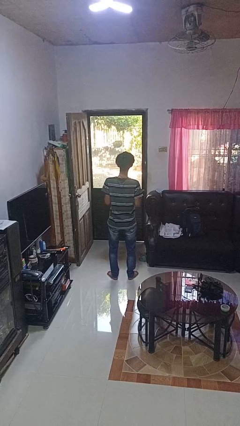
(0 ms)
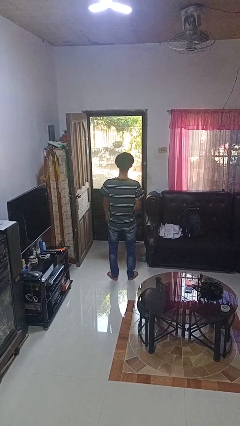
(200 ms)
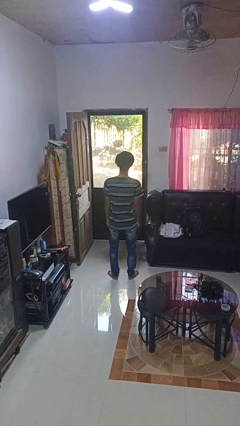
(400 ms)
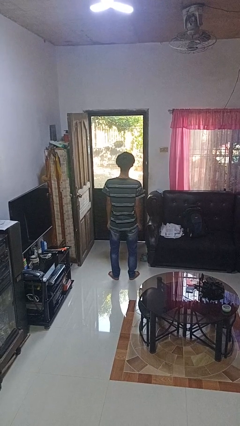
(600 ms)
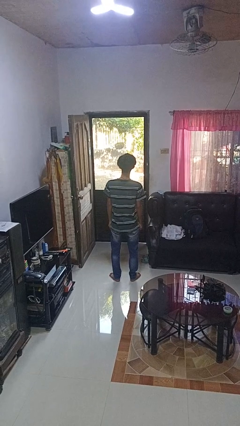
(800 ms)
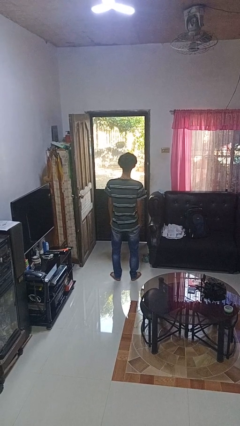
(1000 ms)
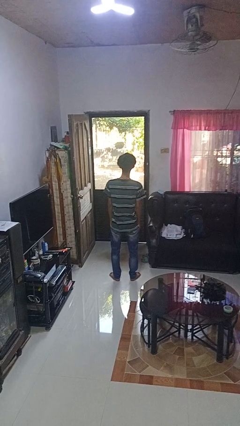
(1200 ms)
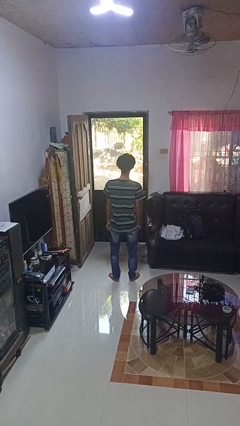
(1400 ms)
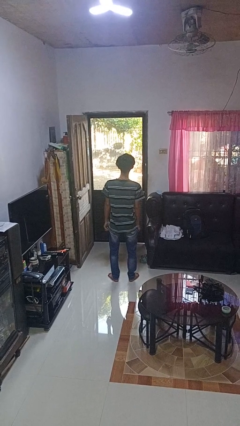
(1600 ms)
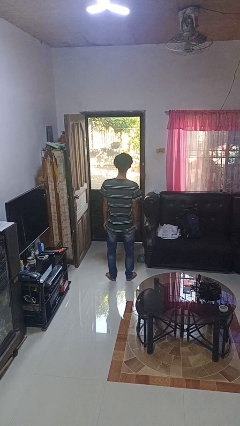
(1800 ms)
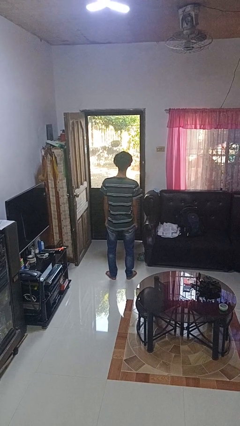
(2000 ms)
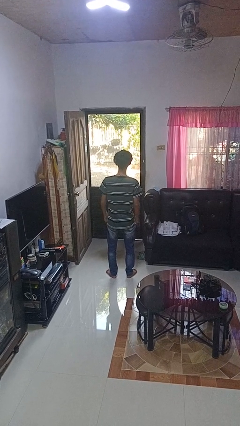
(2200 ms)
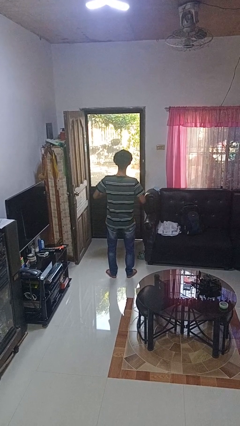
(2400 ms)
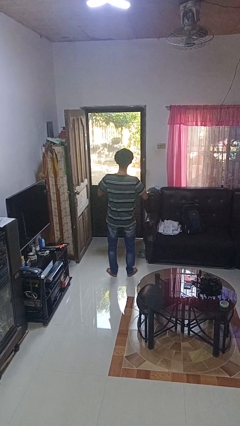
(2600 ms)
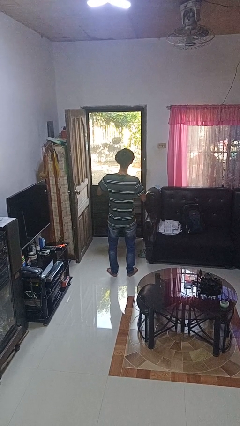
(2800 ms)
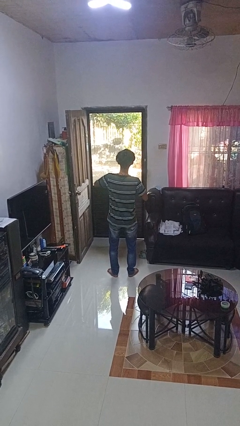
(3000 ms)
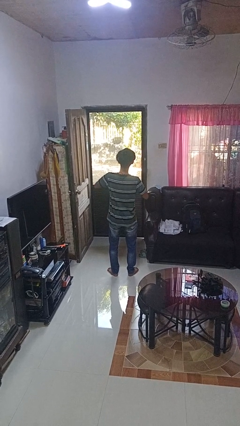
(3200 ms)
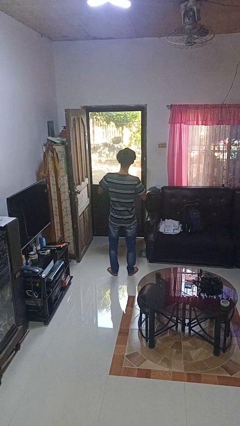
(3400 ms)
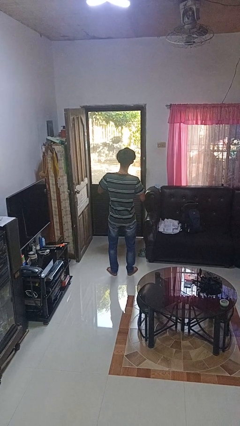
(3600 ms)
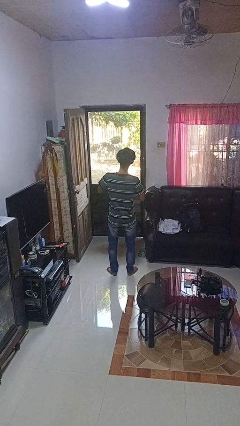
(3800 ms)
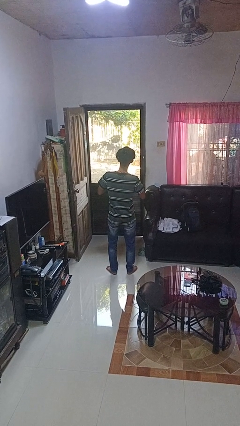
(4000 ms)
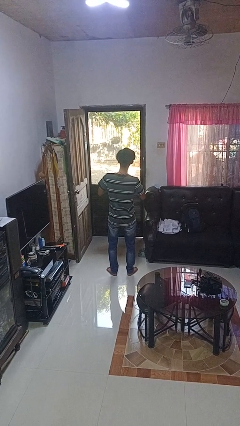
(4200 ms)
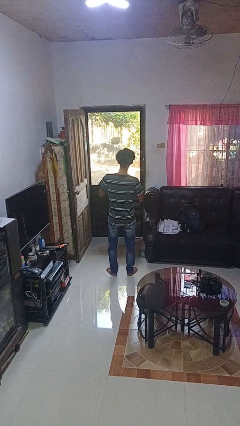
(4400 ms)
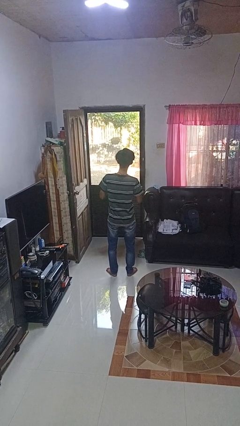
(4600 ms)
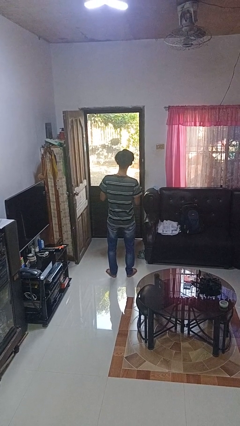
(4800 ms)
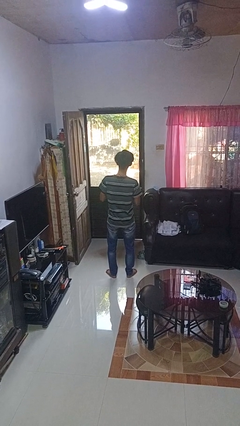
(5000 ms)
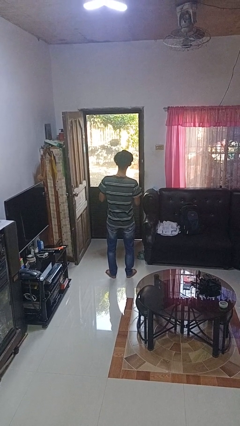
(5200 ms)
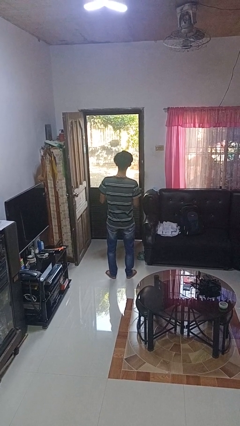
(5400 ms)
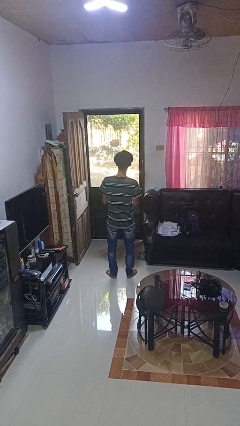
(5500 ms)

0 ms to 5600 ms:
person buttons shirt

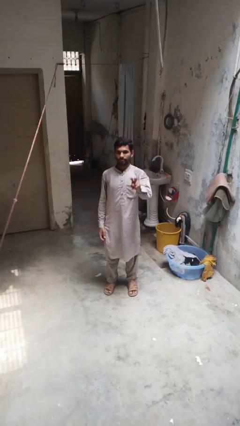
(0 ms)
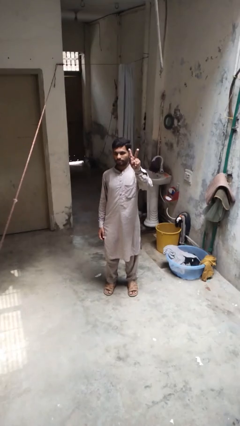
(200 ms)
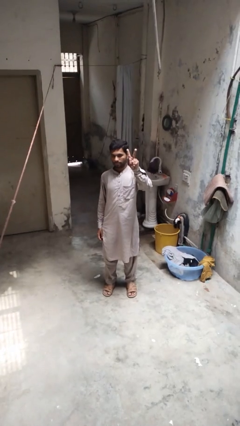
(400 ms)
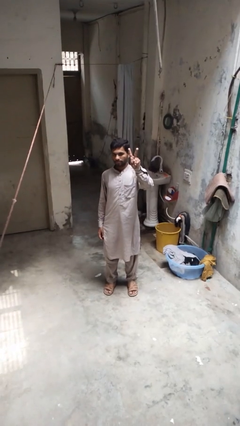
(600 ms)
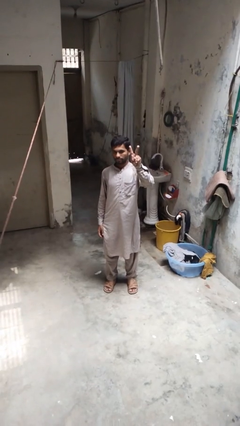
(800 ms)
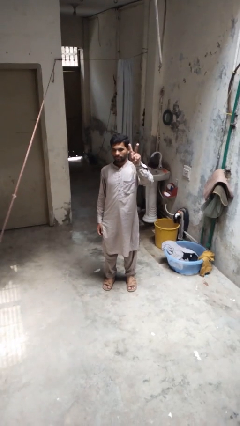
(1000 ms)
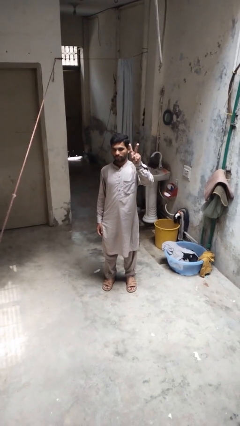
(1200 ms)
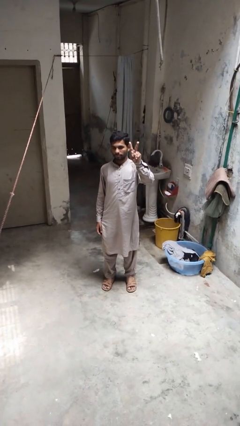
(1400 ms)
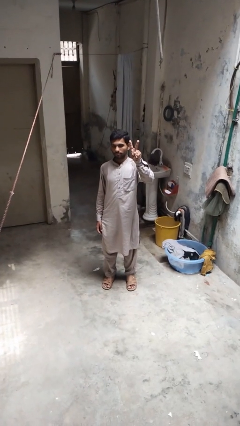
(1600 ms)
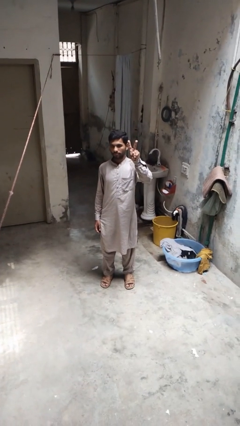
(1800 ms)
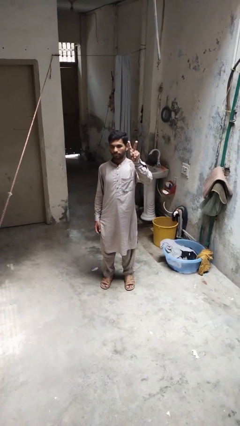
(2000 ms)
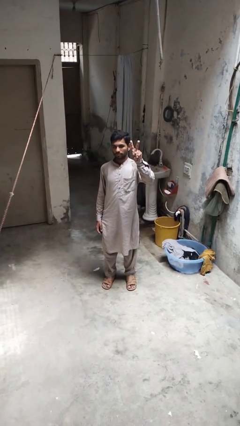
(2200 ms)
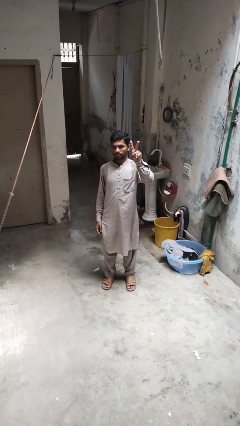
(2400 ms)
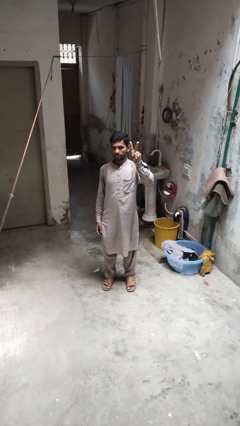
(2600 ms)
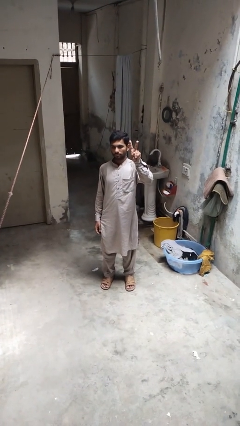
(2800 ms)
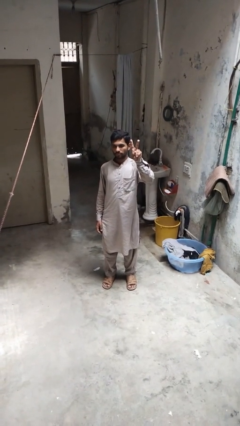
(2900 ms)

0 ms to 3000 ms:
person gestures peace

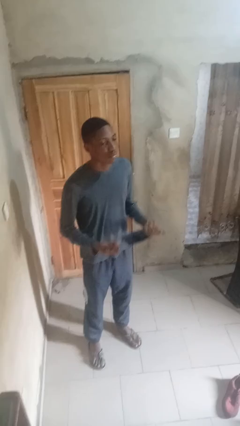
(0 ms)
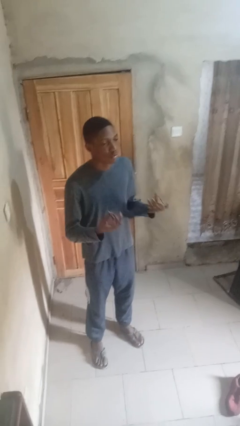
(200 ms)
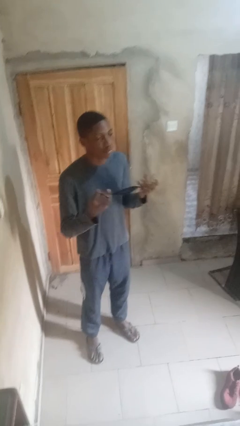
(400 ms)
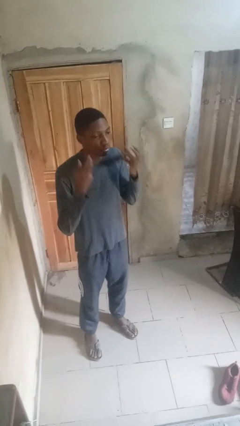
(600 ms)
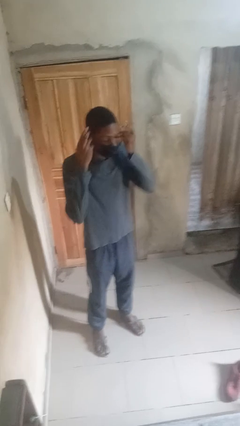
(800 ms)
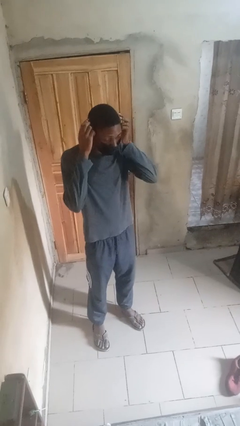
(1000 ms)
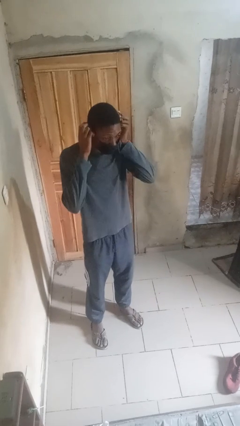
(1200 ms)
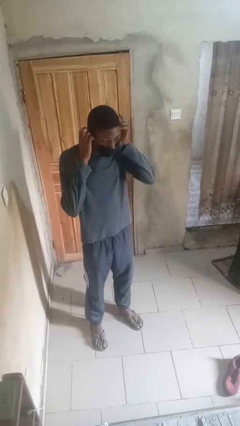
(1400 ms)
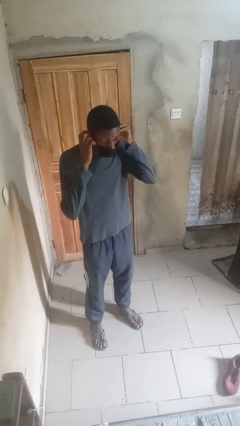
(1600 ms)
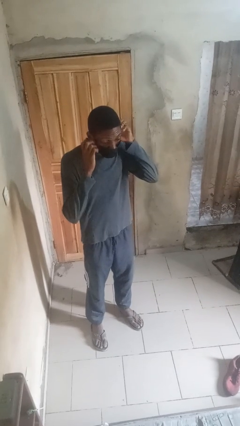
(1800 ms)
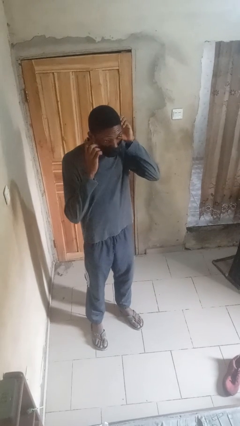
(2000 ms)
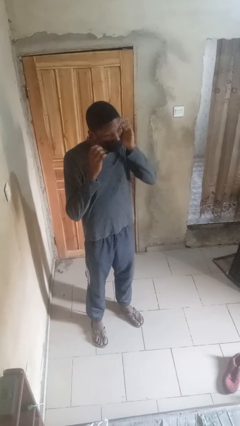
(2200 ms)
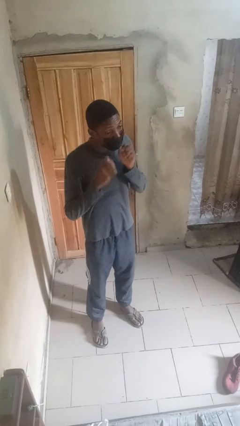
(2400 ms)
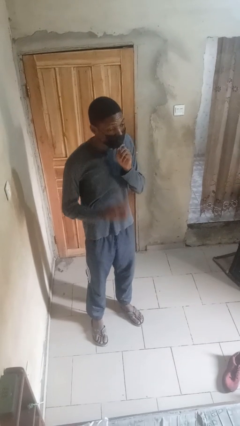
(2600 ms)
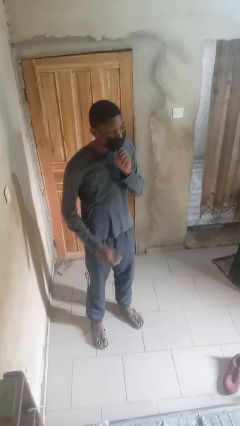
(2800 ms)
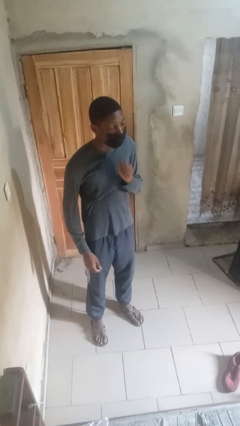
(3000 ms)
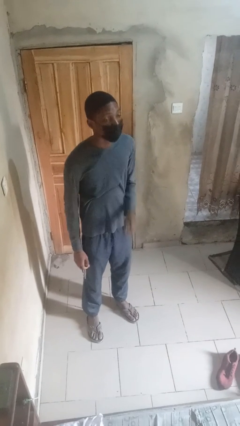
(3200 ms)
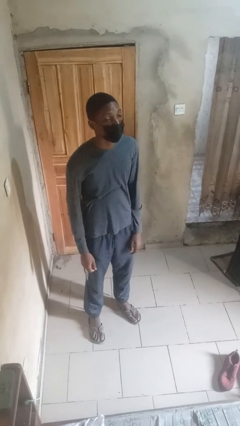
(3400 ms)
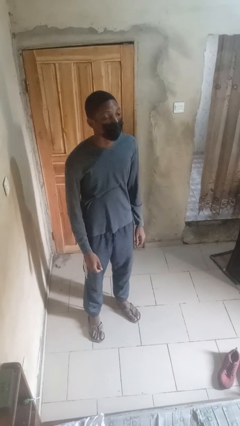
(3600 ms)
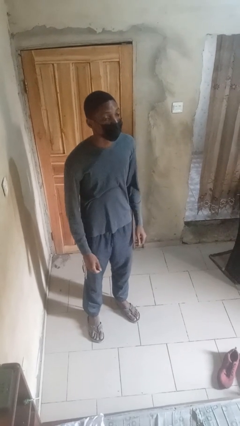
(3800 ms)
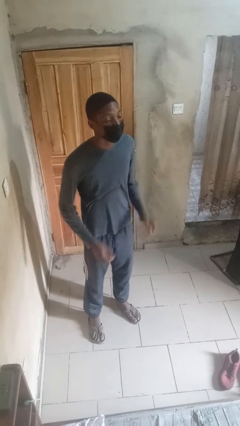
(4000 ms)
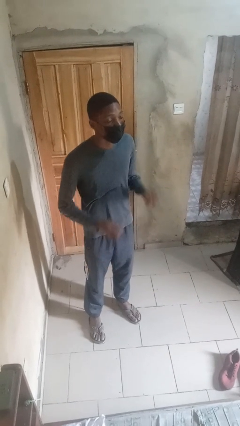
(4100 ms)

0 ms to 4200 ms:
person puts on facemask

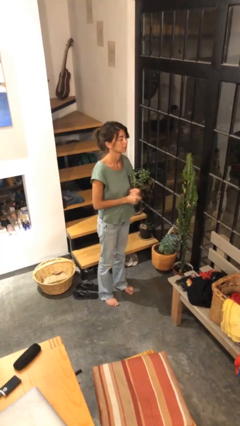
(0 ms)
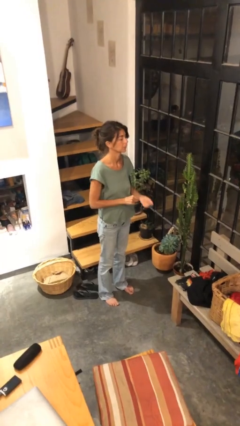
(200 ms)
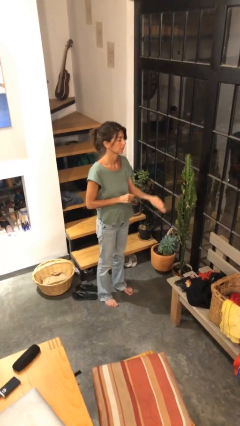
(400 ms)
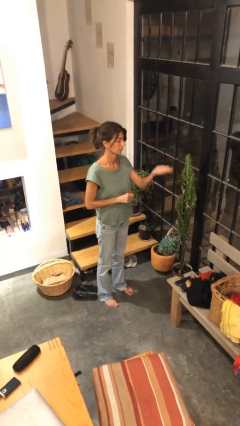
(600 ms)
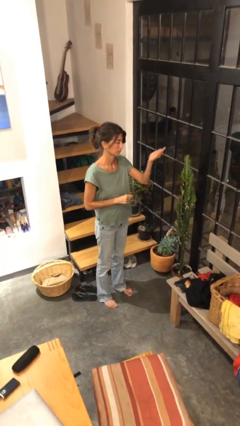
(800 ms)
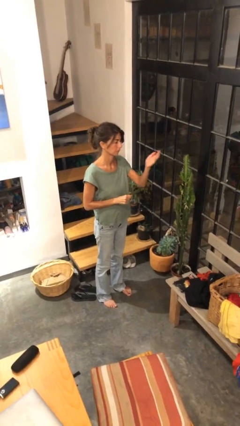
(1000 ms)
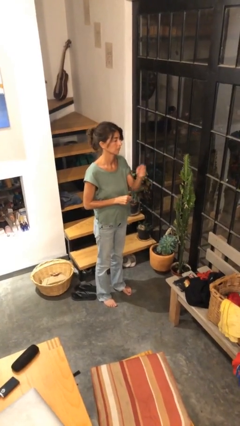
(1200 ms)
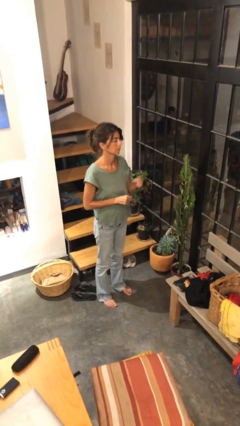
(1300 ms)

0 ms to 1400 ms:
person gestures swipe up

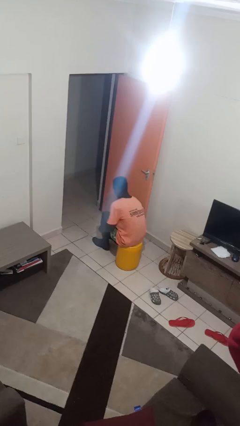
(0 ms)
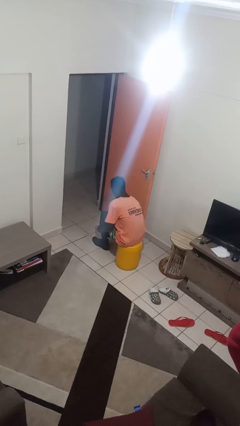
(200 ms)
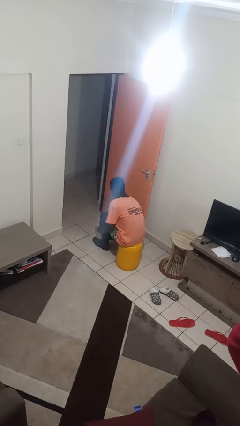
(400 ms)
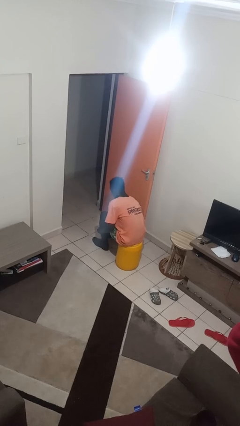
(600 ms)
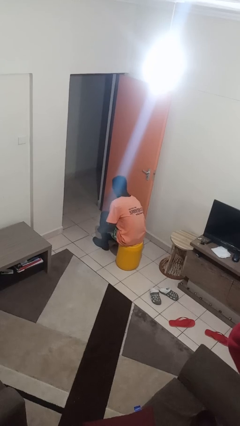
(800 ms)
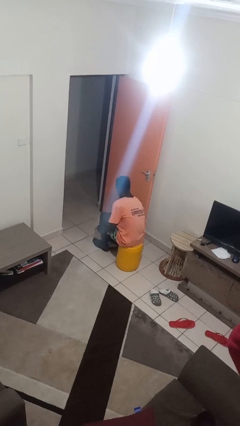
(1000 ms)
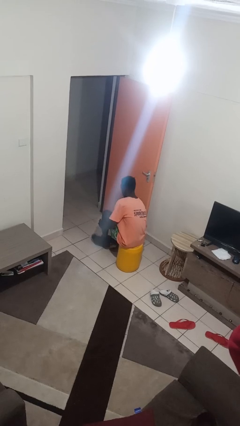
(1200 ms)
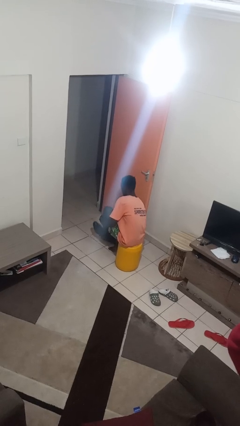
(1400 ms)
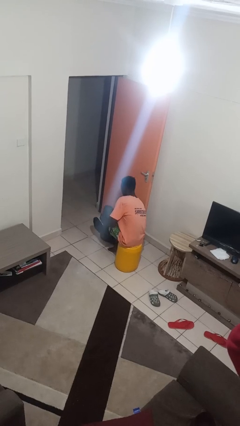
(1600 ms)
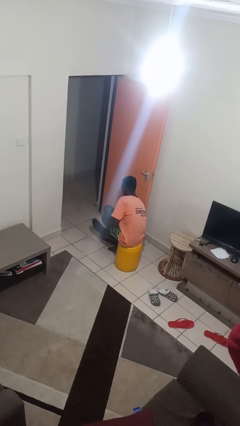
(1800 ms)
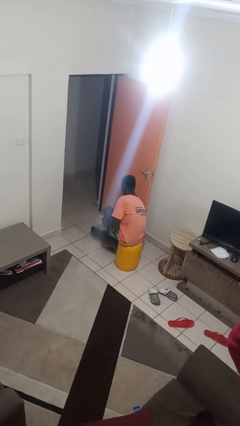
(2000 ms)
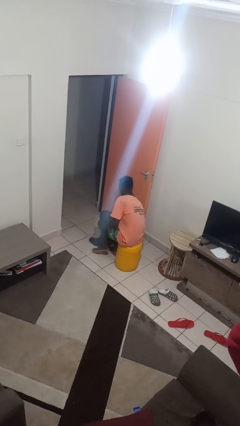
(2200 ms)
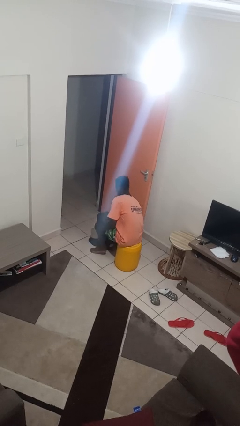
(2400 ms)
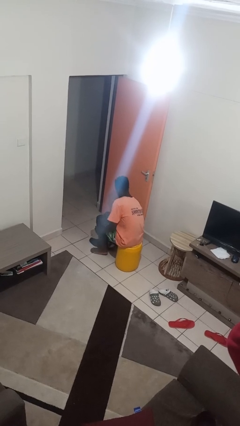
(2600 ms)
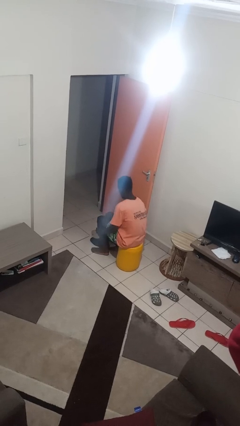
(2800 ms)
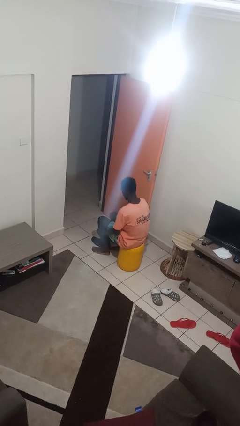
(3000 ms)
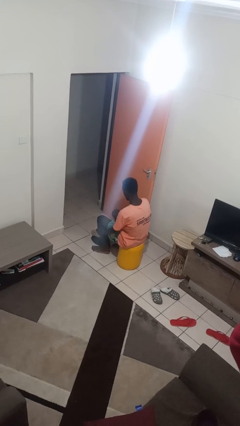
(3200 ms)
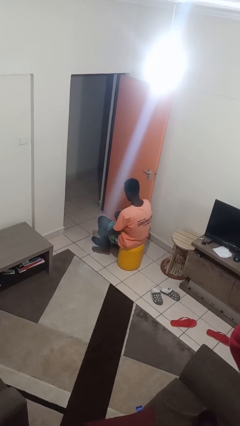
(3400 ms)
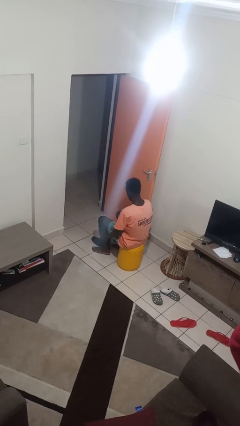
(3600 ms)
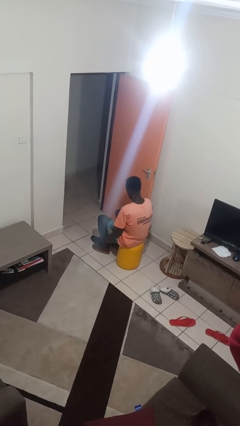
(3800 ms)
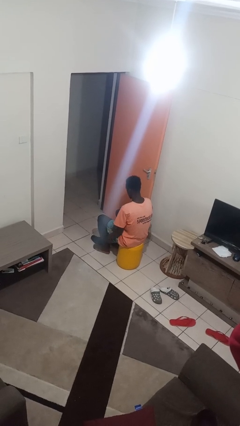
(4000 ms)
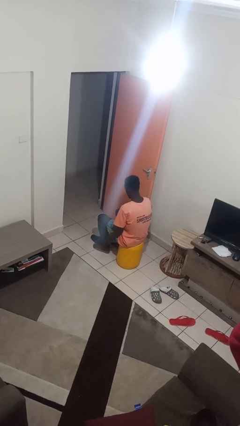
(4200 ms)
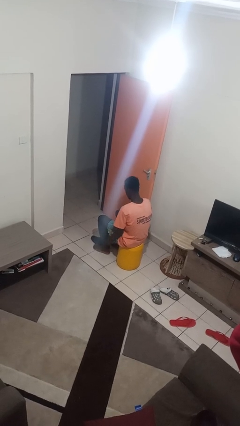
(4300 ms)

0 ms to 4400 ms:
person takes off shoes
